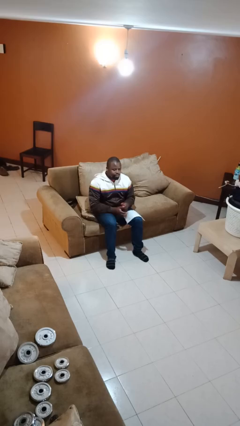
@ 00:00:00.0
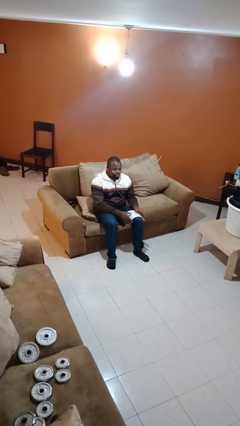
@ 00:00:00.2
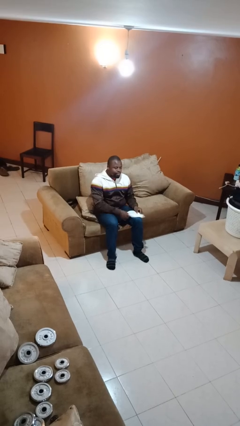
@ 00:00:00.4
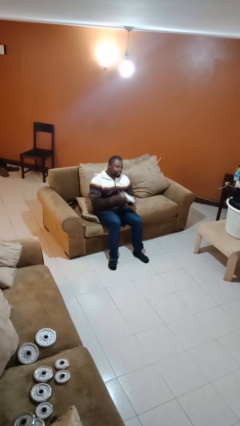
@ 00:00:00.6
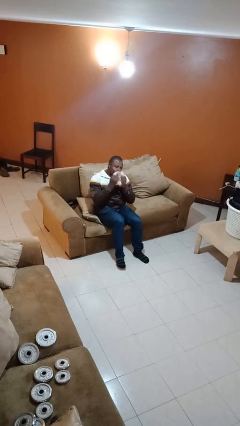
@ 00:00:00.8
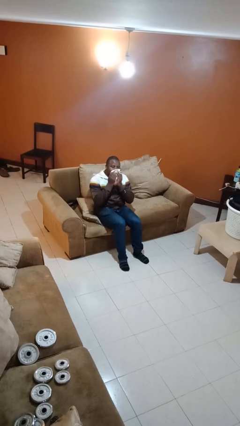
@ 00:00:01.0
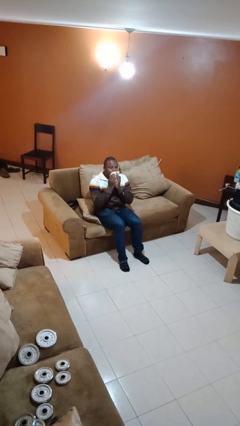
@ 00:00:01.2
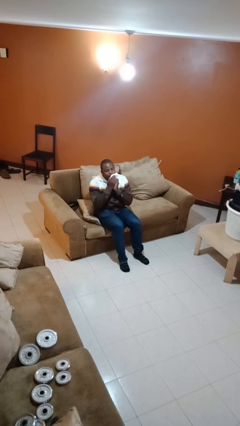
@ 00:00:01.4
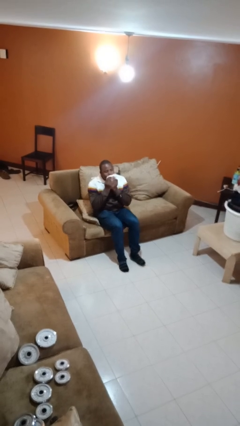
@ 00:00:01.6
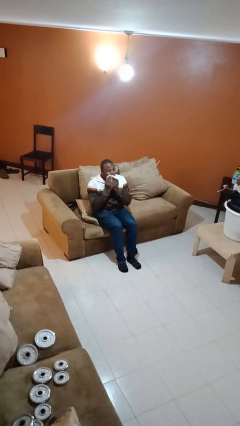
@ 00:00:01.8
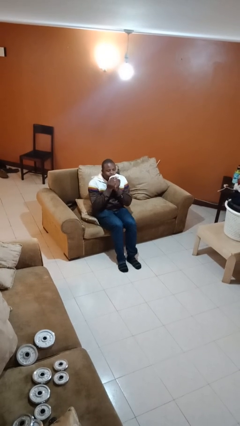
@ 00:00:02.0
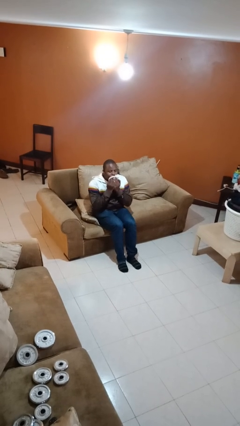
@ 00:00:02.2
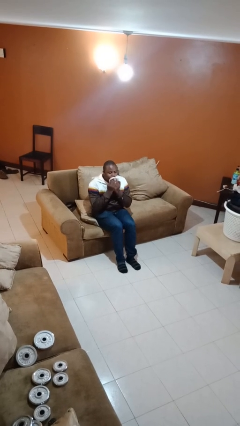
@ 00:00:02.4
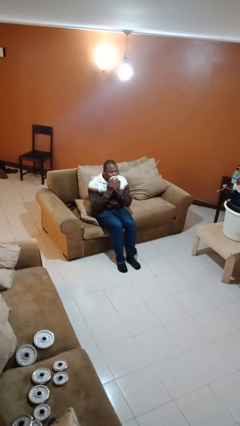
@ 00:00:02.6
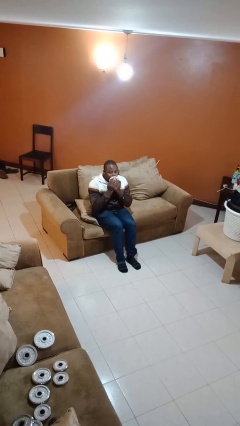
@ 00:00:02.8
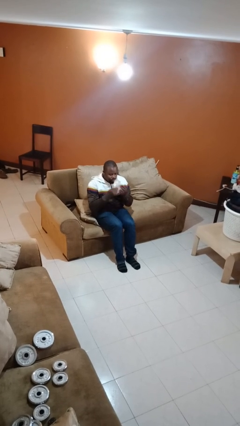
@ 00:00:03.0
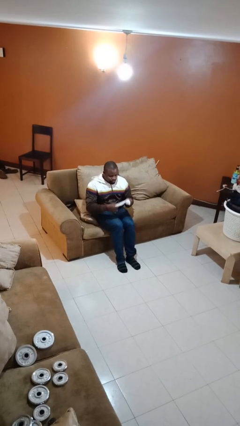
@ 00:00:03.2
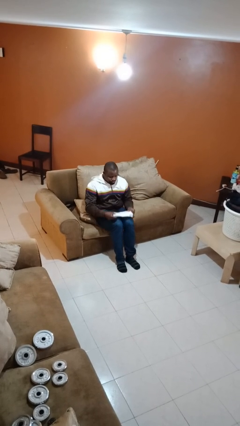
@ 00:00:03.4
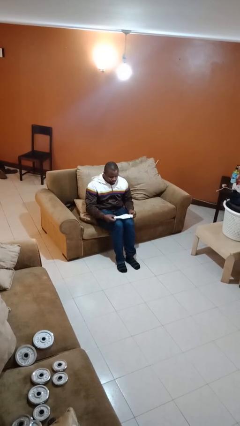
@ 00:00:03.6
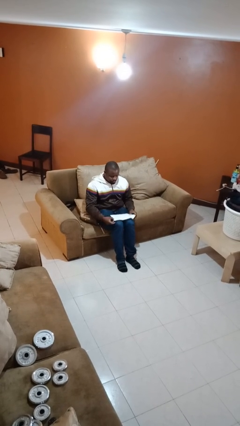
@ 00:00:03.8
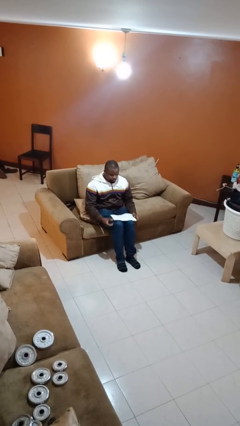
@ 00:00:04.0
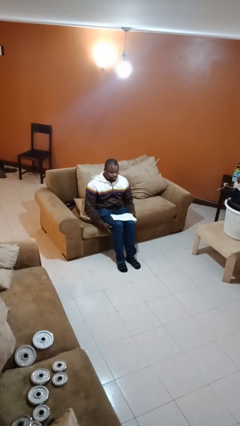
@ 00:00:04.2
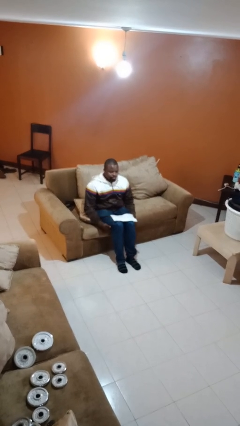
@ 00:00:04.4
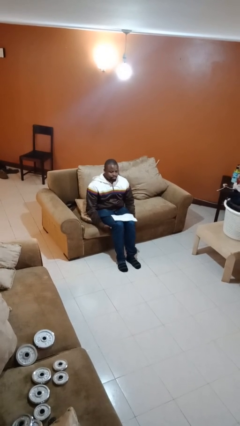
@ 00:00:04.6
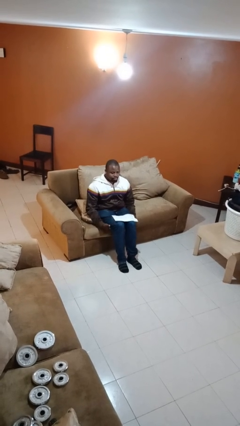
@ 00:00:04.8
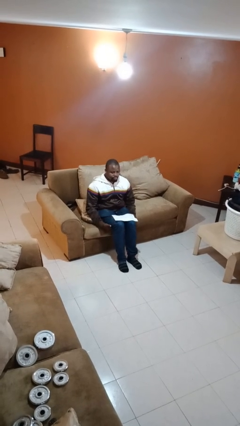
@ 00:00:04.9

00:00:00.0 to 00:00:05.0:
person wipes mouth with napkin

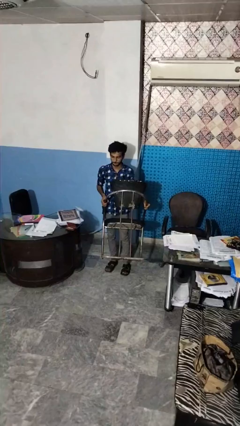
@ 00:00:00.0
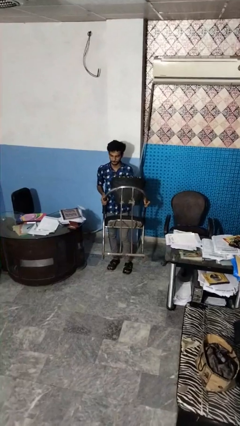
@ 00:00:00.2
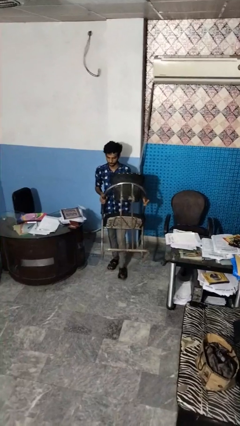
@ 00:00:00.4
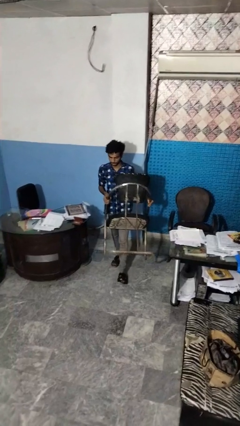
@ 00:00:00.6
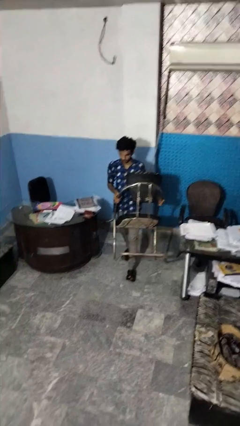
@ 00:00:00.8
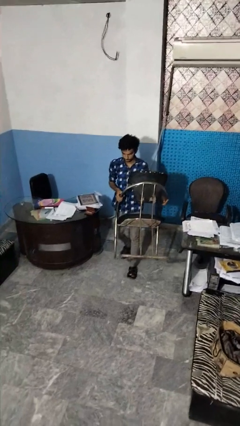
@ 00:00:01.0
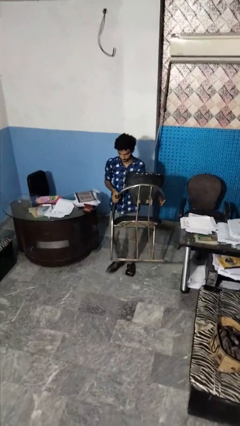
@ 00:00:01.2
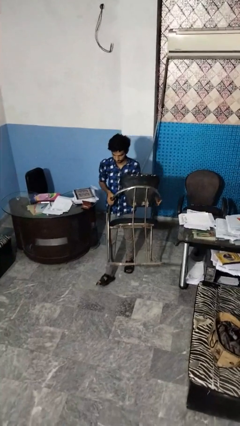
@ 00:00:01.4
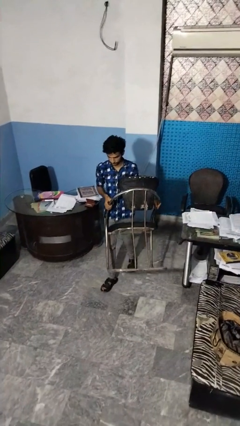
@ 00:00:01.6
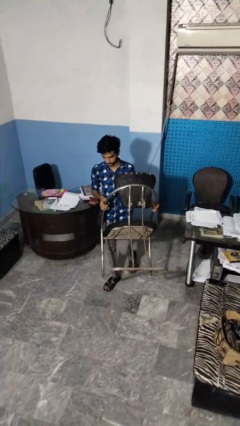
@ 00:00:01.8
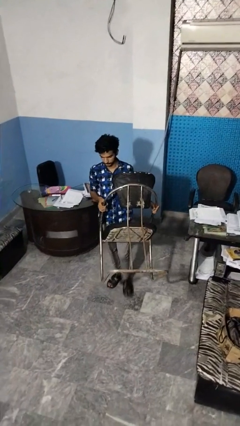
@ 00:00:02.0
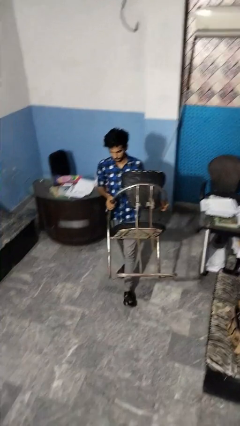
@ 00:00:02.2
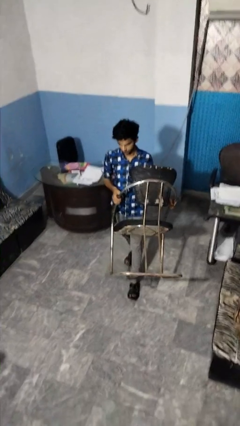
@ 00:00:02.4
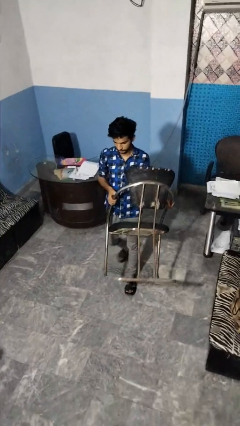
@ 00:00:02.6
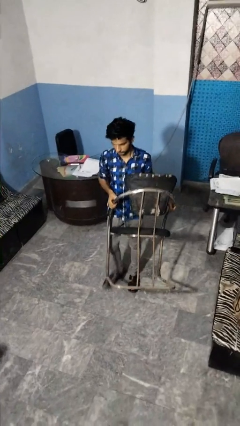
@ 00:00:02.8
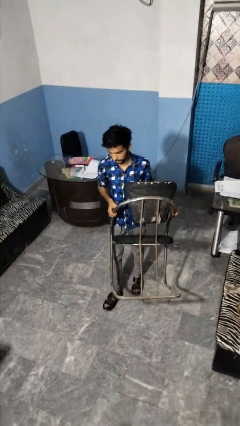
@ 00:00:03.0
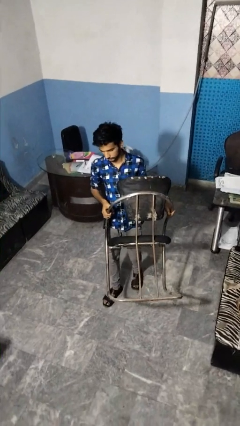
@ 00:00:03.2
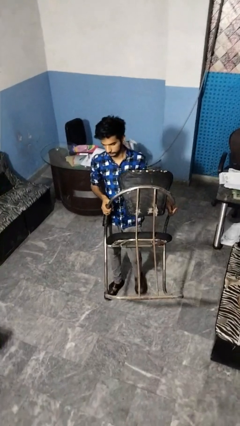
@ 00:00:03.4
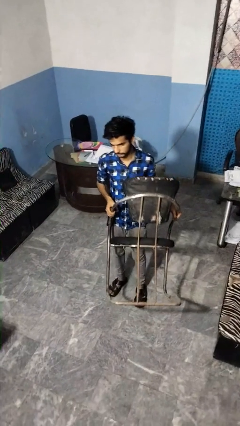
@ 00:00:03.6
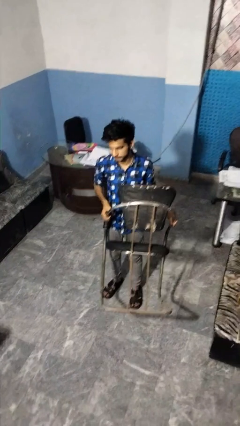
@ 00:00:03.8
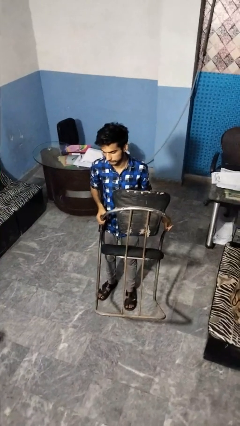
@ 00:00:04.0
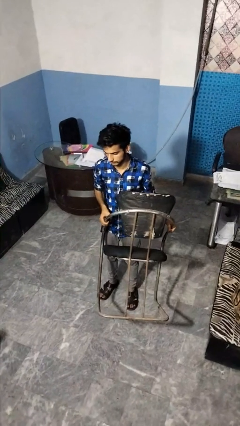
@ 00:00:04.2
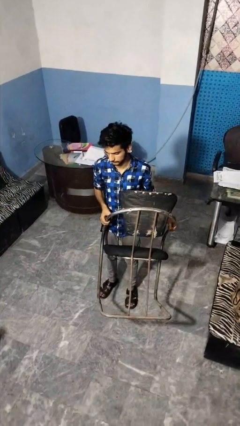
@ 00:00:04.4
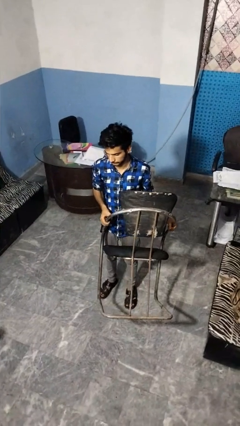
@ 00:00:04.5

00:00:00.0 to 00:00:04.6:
person carries furniture

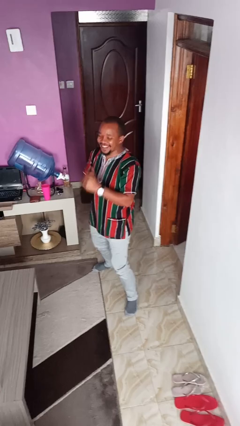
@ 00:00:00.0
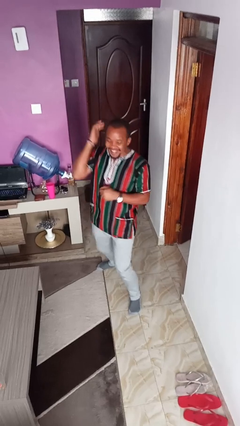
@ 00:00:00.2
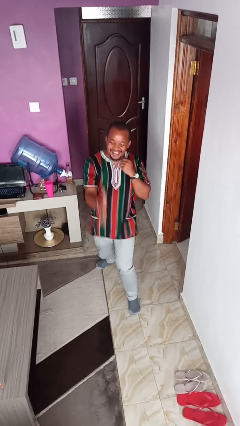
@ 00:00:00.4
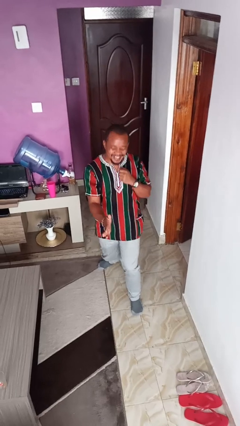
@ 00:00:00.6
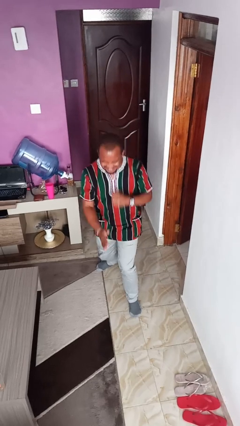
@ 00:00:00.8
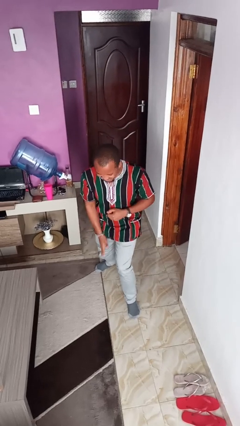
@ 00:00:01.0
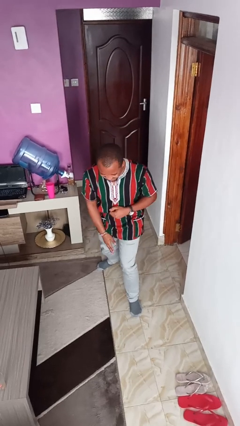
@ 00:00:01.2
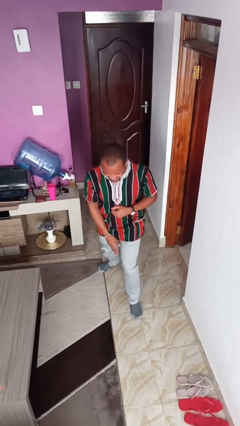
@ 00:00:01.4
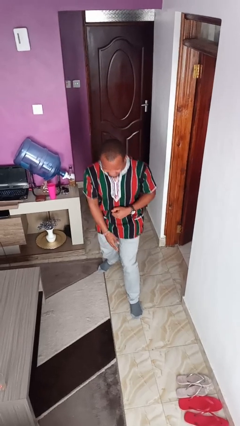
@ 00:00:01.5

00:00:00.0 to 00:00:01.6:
person karate chop

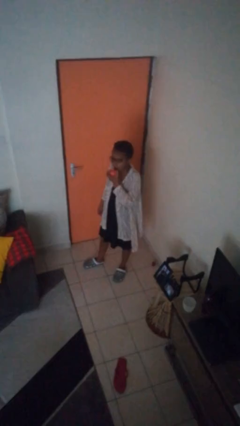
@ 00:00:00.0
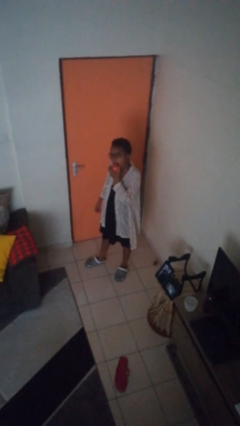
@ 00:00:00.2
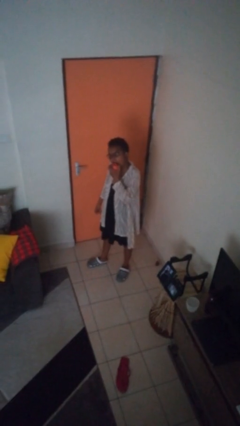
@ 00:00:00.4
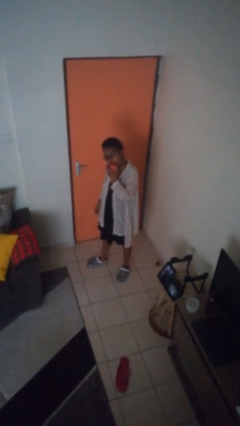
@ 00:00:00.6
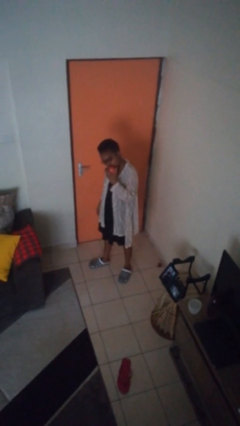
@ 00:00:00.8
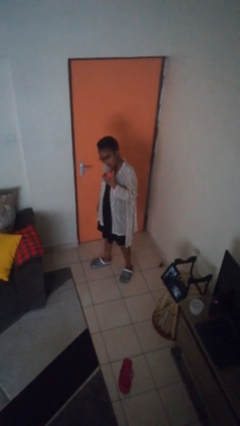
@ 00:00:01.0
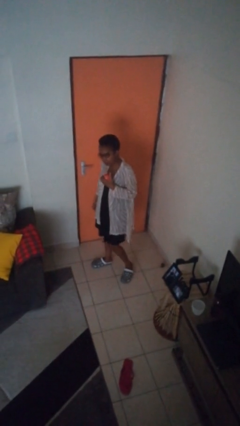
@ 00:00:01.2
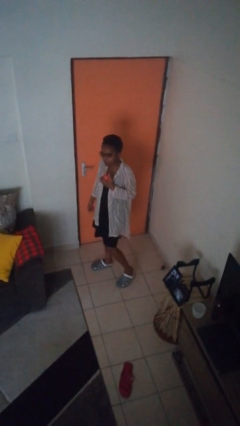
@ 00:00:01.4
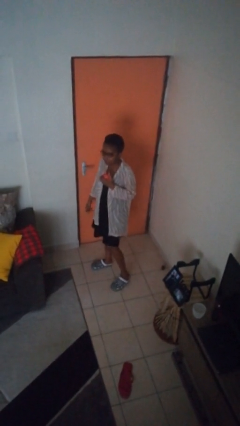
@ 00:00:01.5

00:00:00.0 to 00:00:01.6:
person eats apple

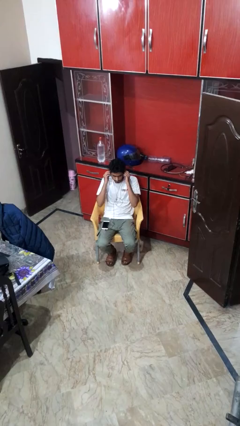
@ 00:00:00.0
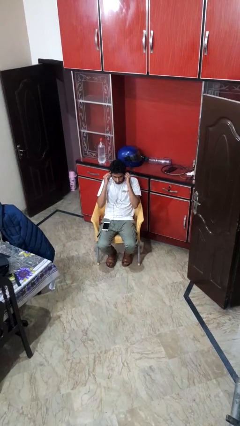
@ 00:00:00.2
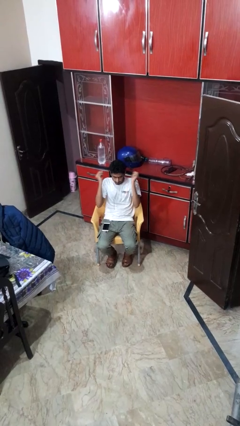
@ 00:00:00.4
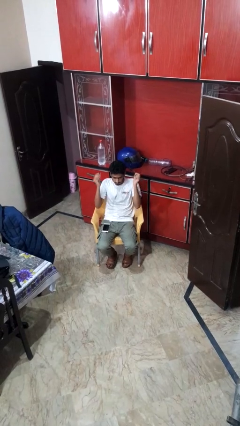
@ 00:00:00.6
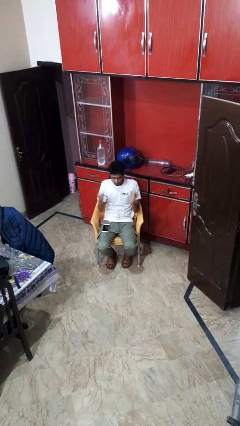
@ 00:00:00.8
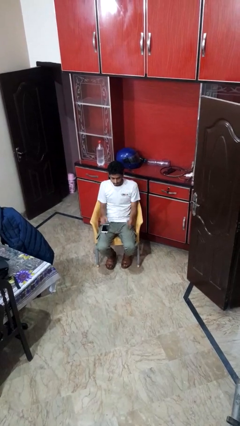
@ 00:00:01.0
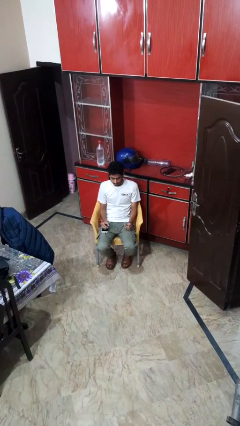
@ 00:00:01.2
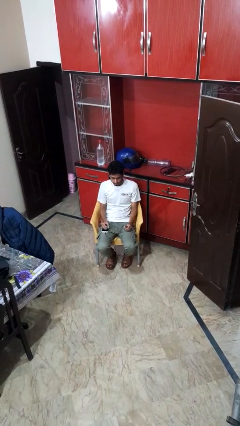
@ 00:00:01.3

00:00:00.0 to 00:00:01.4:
person takes off headphones

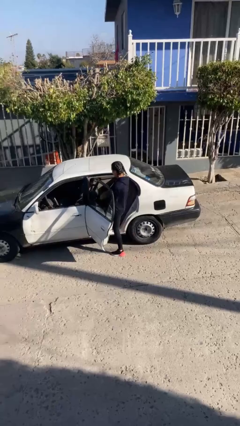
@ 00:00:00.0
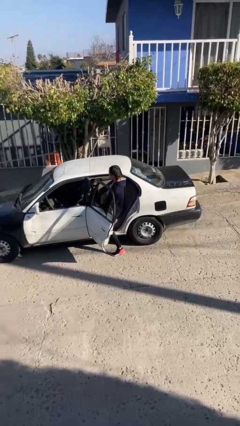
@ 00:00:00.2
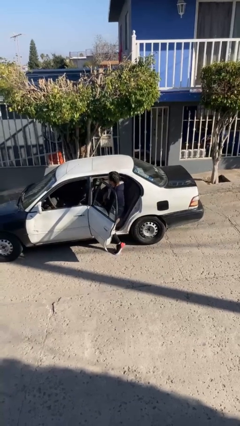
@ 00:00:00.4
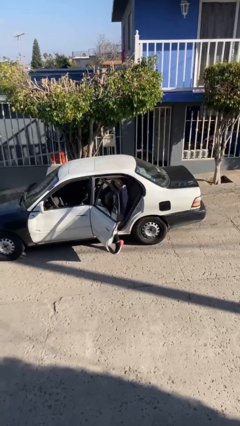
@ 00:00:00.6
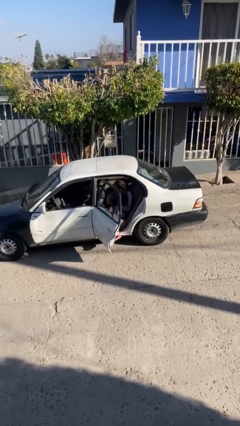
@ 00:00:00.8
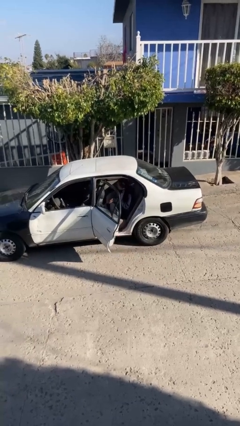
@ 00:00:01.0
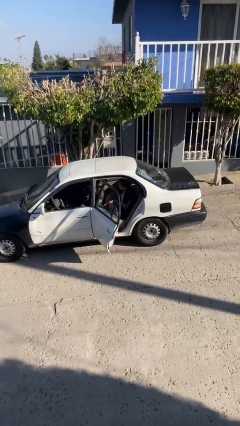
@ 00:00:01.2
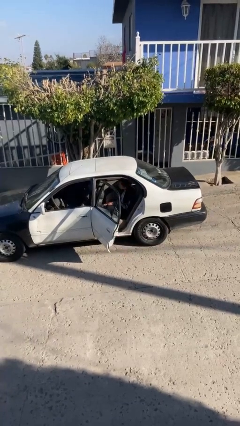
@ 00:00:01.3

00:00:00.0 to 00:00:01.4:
person enters car

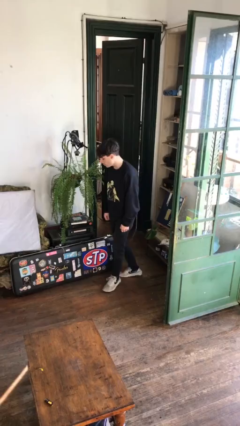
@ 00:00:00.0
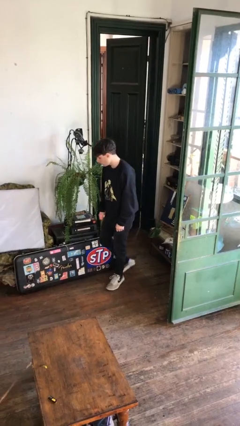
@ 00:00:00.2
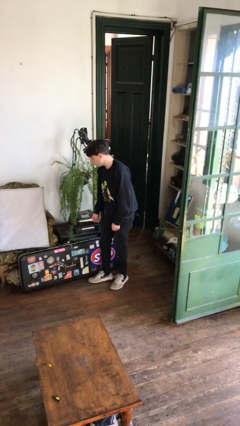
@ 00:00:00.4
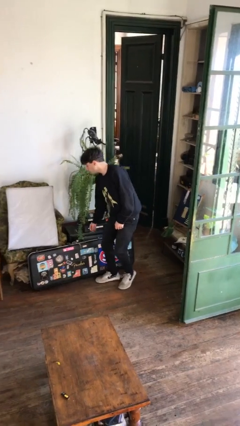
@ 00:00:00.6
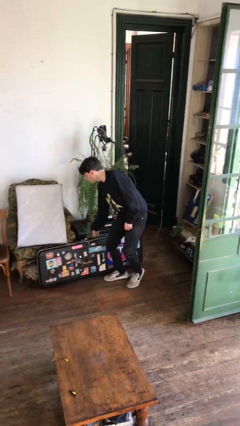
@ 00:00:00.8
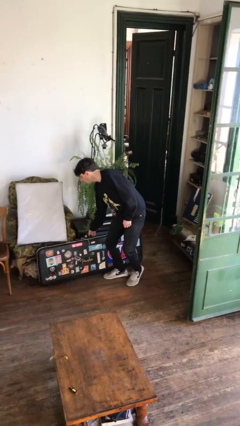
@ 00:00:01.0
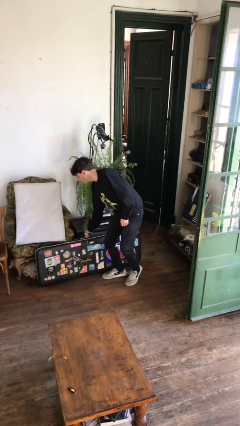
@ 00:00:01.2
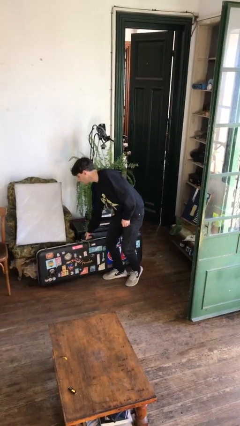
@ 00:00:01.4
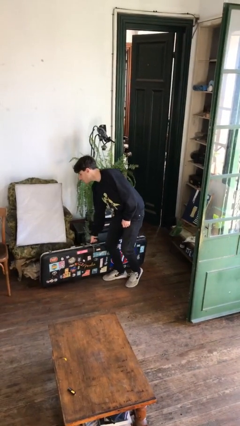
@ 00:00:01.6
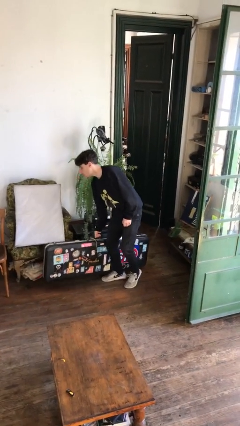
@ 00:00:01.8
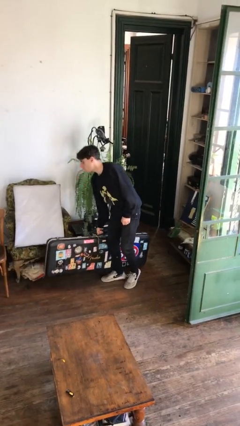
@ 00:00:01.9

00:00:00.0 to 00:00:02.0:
person picks up object from floor
